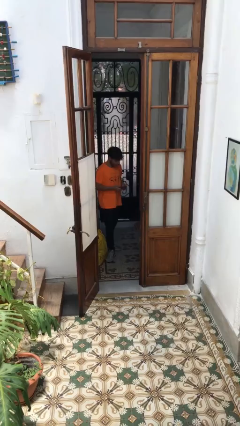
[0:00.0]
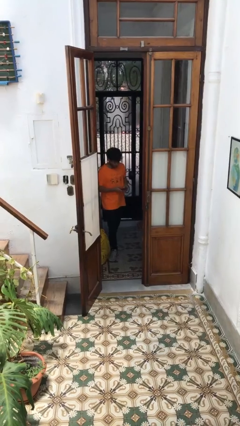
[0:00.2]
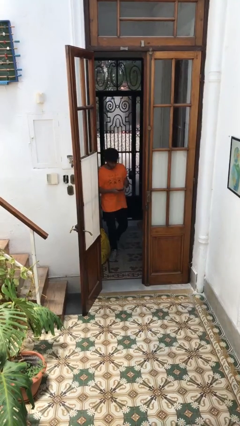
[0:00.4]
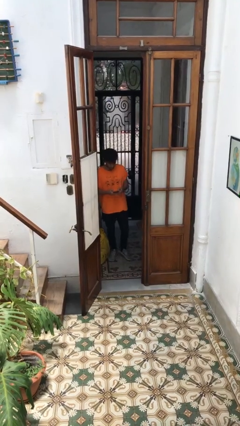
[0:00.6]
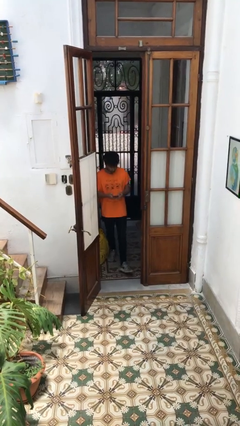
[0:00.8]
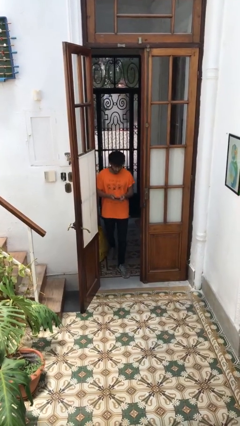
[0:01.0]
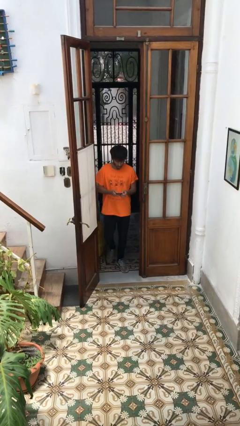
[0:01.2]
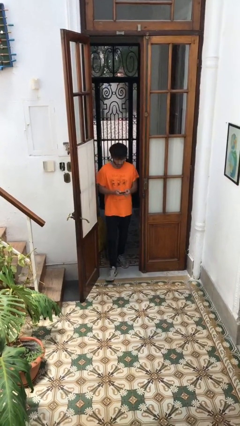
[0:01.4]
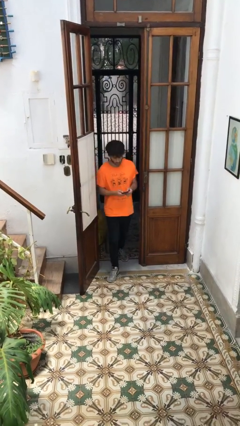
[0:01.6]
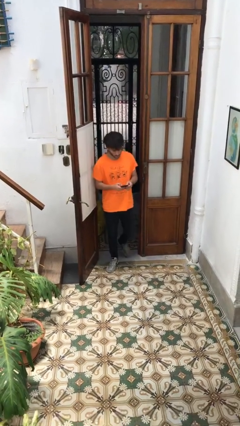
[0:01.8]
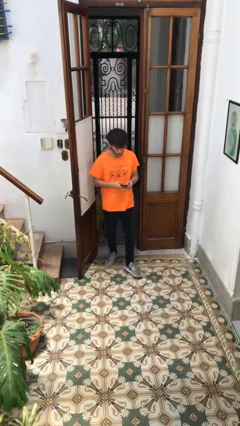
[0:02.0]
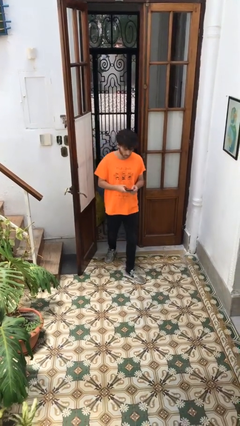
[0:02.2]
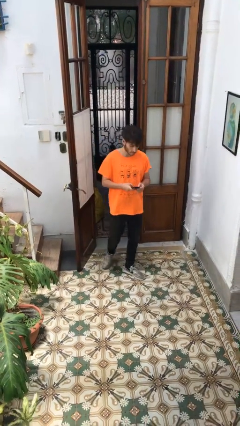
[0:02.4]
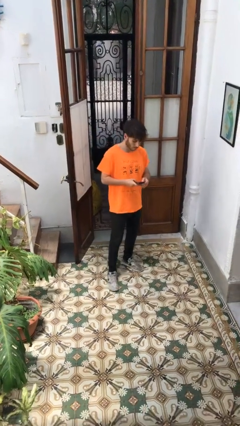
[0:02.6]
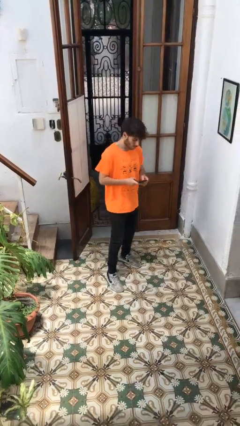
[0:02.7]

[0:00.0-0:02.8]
person enters scene through structure

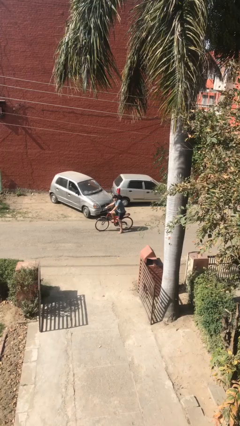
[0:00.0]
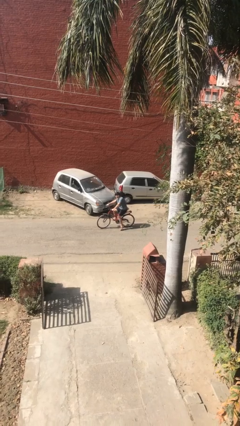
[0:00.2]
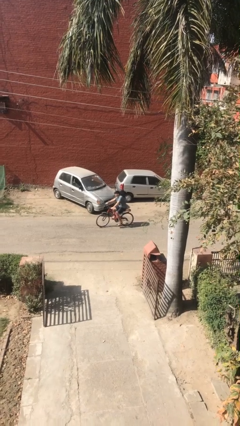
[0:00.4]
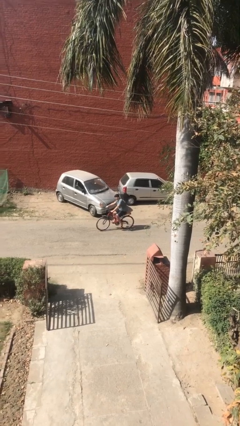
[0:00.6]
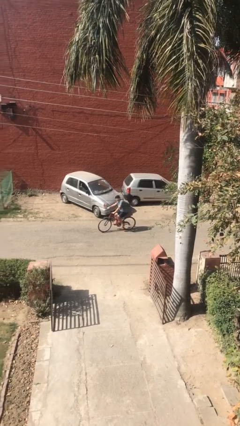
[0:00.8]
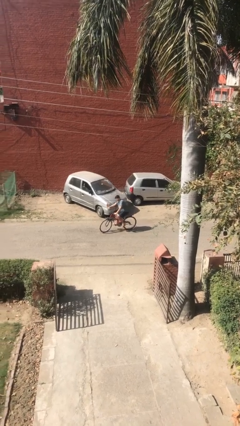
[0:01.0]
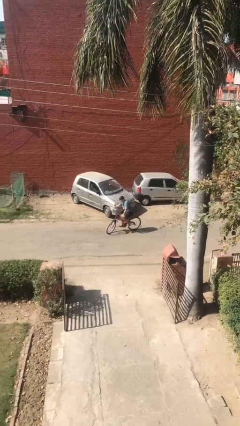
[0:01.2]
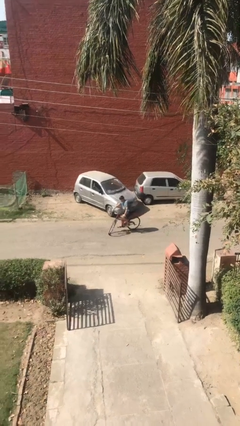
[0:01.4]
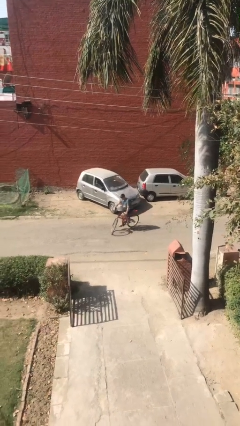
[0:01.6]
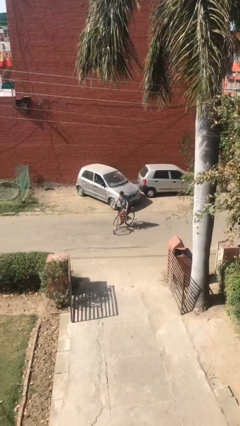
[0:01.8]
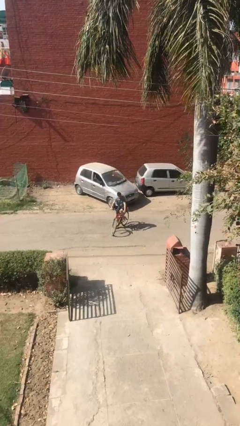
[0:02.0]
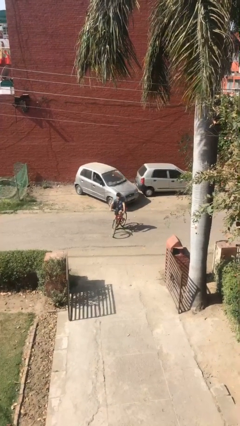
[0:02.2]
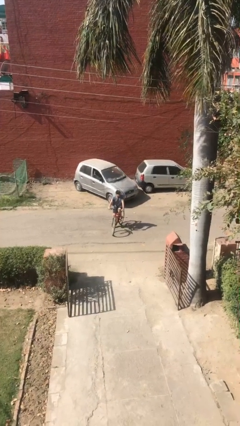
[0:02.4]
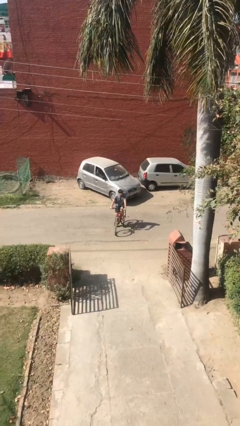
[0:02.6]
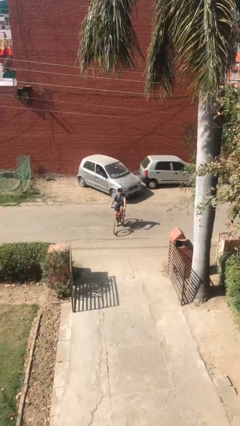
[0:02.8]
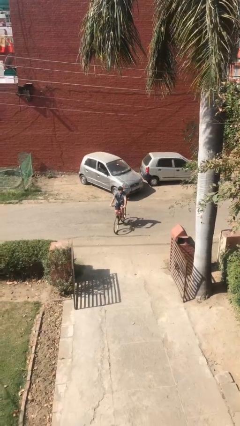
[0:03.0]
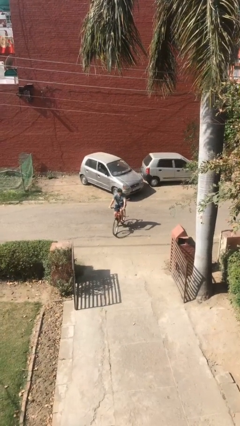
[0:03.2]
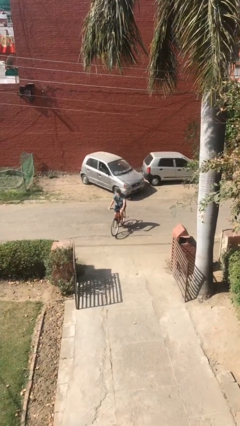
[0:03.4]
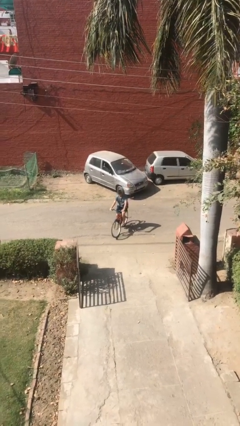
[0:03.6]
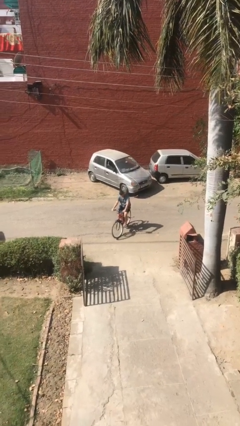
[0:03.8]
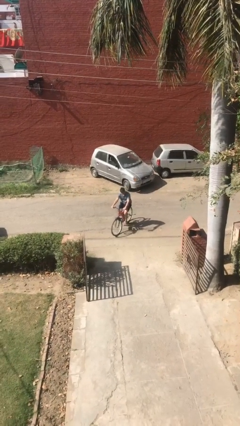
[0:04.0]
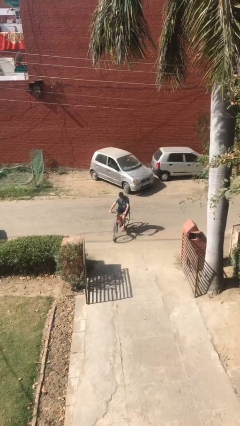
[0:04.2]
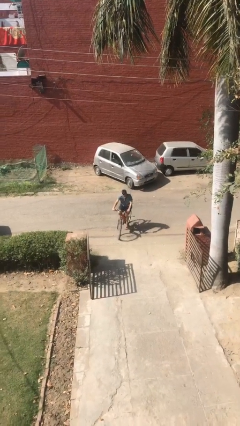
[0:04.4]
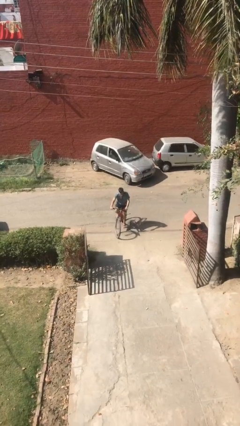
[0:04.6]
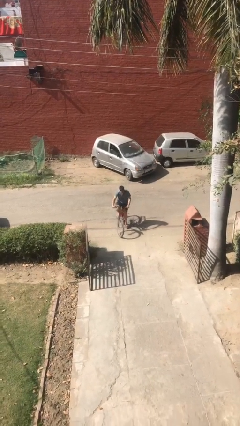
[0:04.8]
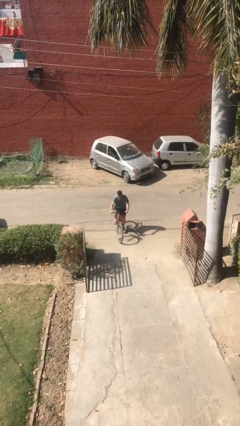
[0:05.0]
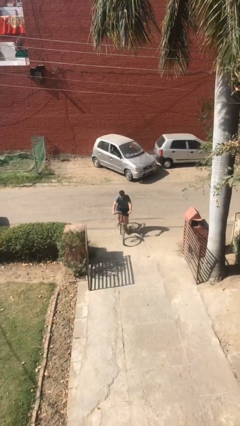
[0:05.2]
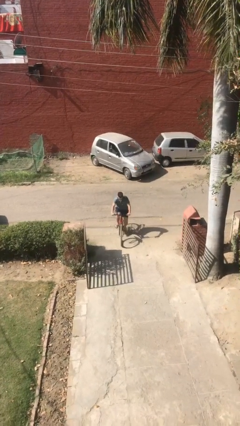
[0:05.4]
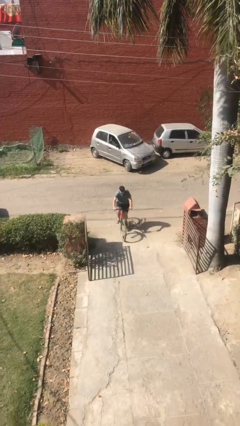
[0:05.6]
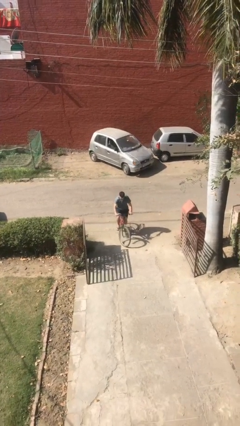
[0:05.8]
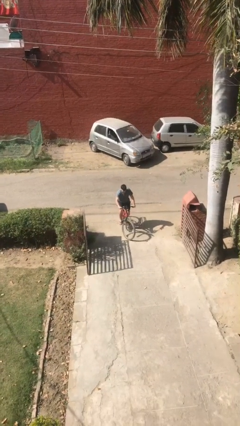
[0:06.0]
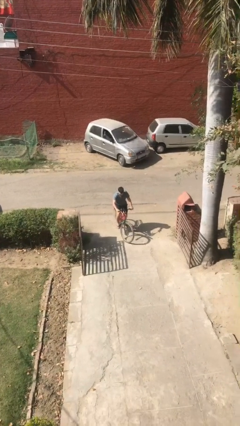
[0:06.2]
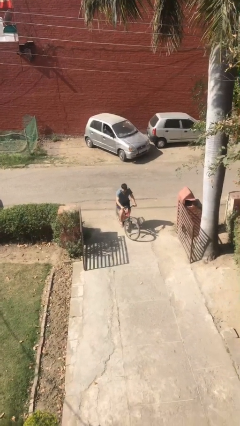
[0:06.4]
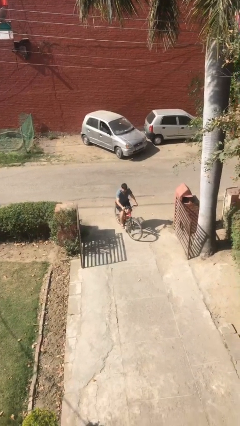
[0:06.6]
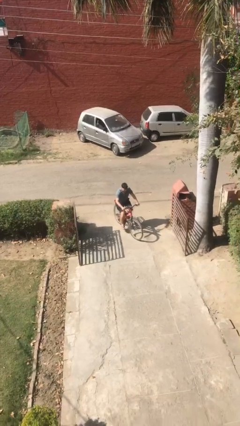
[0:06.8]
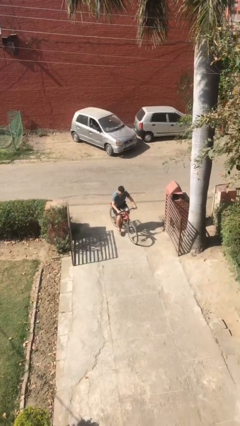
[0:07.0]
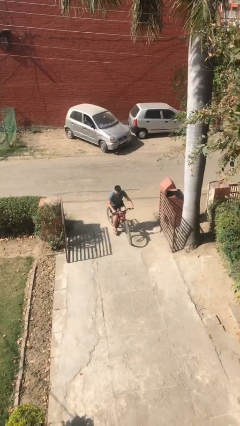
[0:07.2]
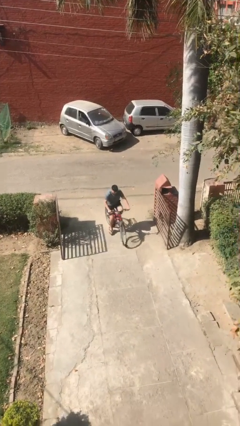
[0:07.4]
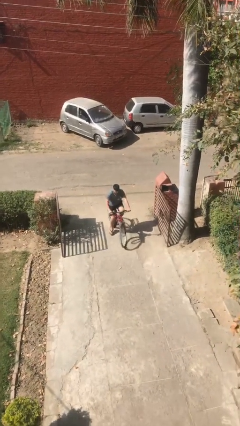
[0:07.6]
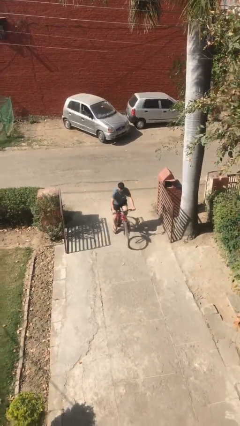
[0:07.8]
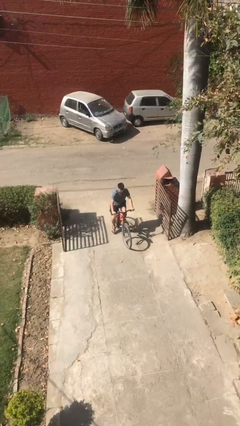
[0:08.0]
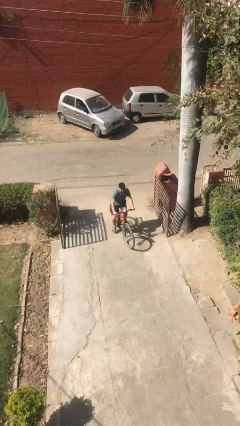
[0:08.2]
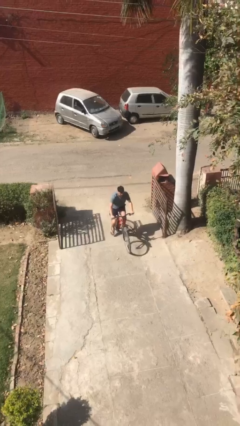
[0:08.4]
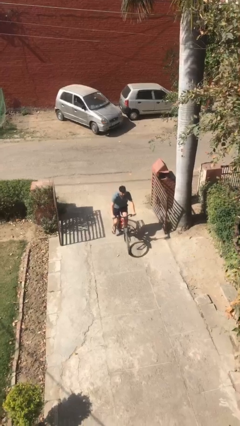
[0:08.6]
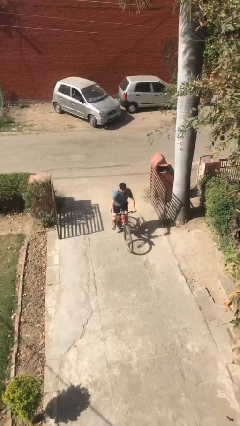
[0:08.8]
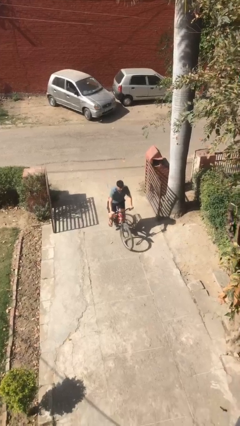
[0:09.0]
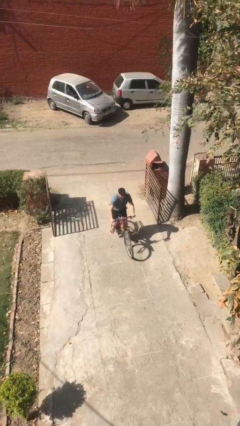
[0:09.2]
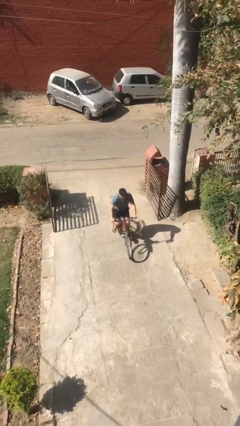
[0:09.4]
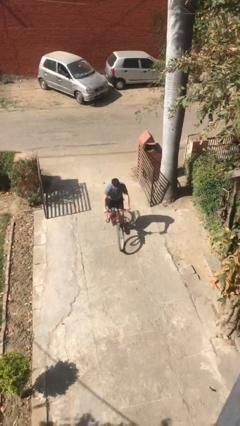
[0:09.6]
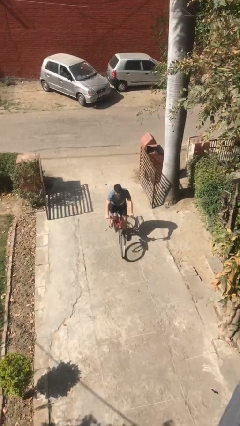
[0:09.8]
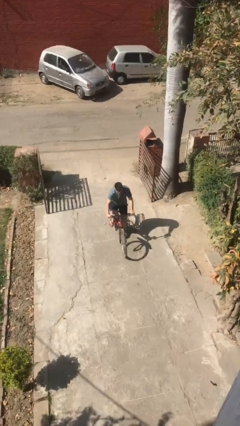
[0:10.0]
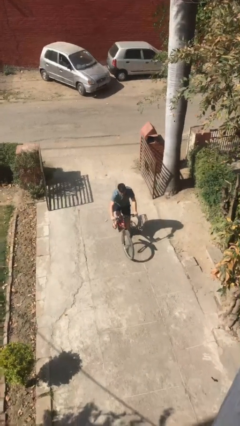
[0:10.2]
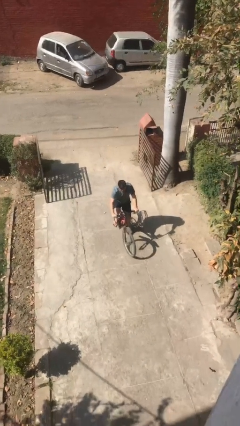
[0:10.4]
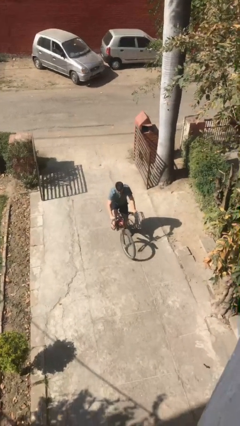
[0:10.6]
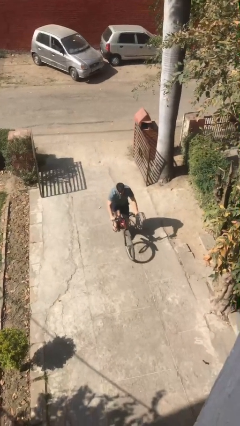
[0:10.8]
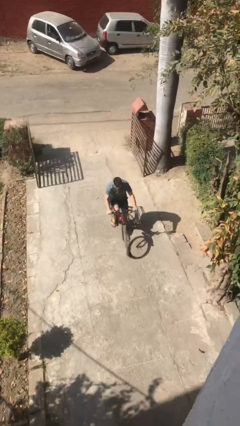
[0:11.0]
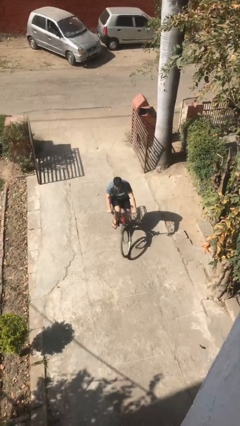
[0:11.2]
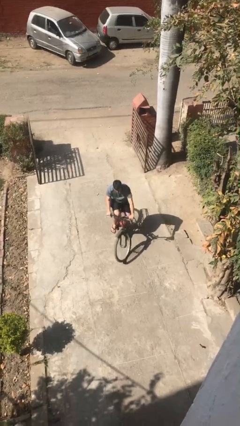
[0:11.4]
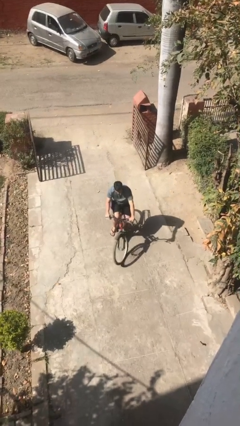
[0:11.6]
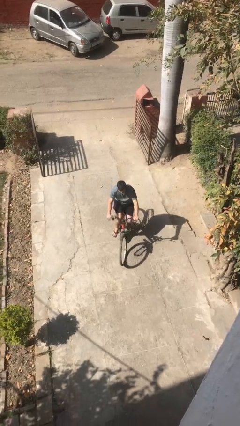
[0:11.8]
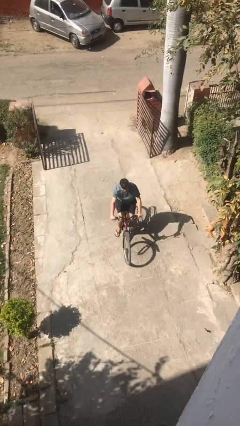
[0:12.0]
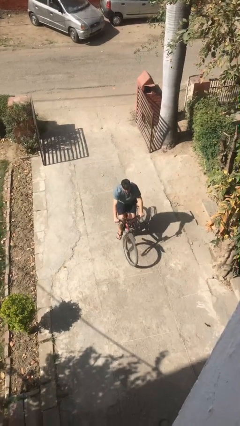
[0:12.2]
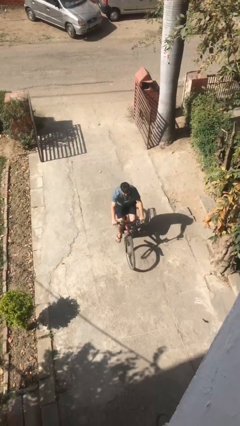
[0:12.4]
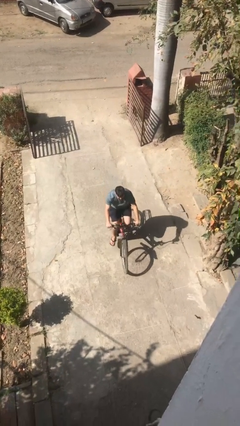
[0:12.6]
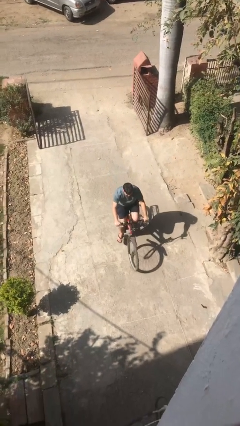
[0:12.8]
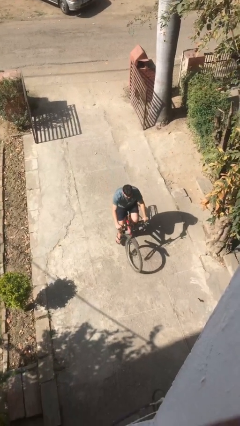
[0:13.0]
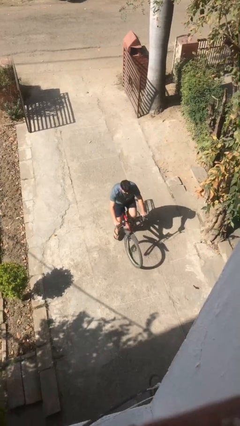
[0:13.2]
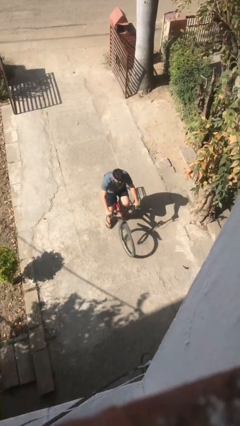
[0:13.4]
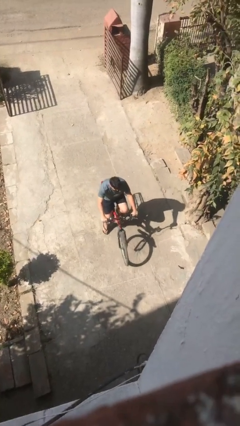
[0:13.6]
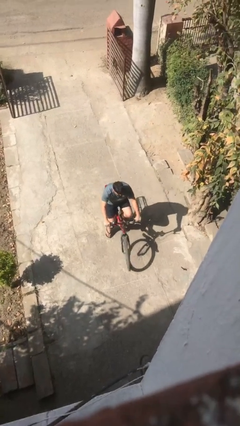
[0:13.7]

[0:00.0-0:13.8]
person rides bicycle

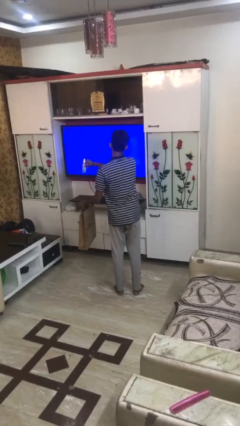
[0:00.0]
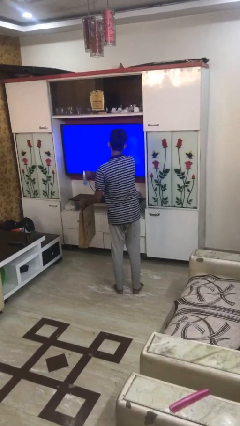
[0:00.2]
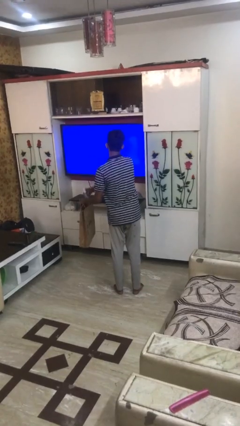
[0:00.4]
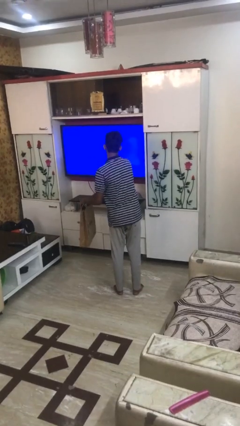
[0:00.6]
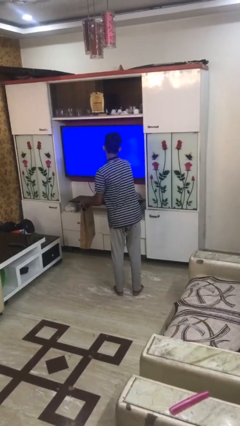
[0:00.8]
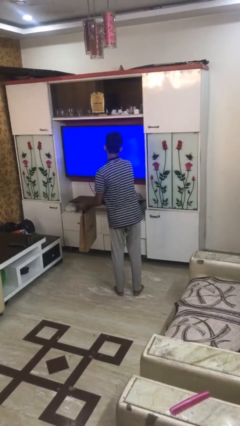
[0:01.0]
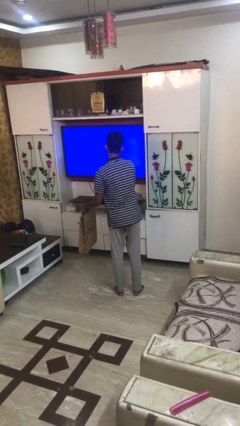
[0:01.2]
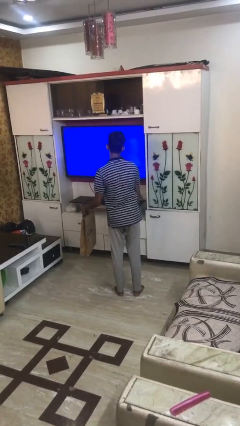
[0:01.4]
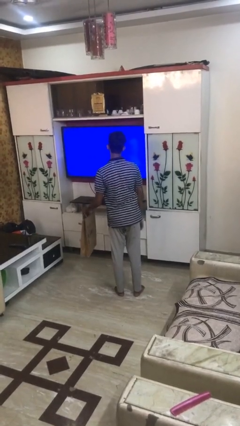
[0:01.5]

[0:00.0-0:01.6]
person puts object into bag

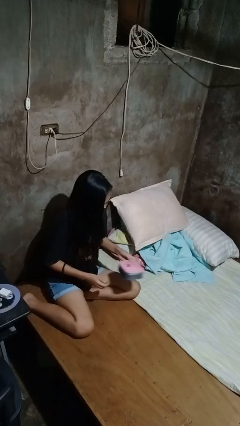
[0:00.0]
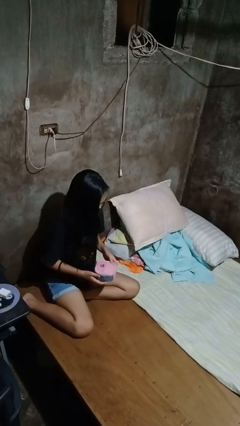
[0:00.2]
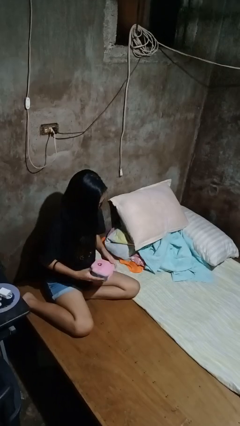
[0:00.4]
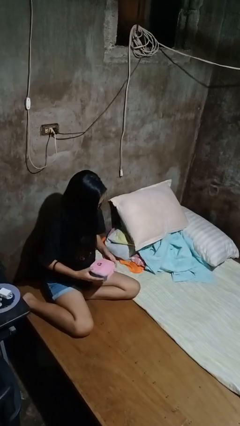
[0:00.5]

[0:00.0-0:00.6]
person picks up object from bed
